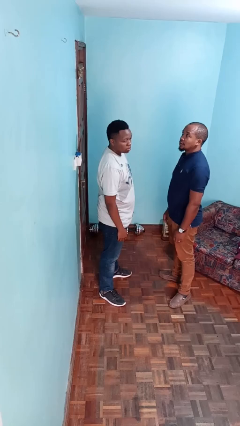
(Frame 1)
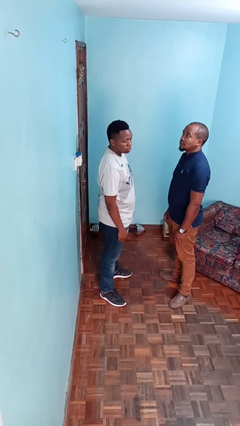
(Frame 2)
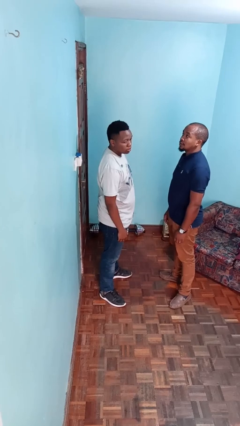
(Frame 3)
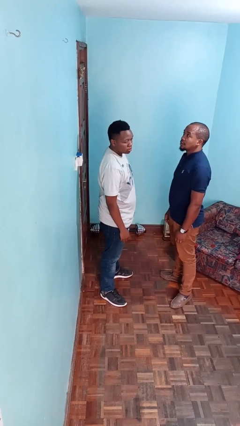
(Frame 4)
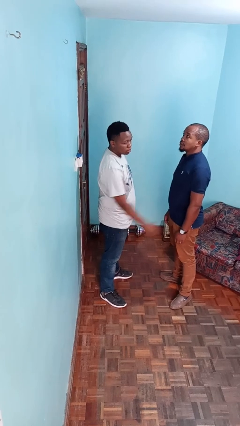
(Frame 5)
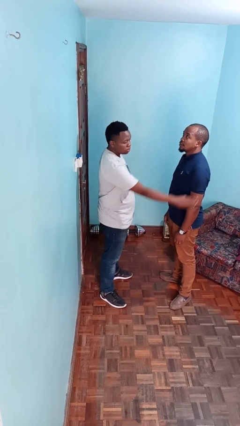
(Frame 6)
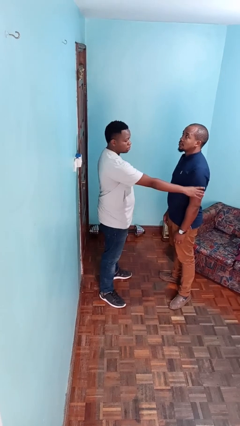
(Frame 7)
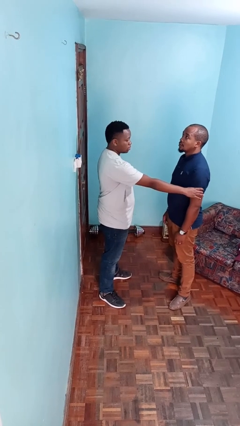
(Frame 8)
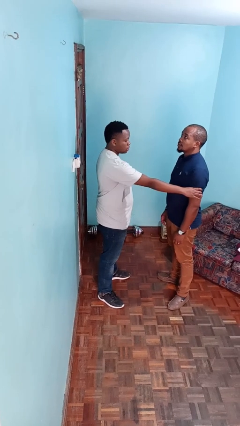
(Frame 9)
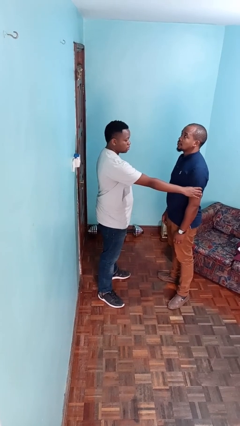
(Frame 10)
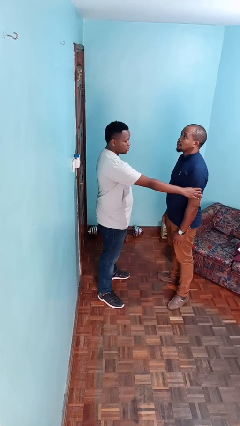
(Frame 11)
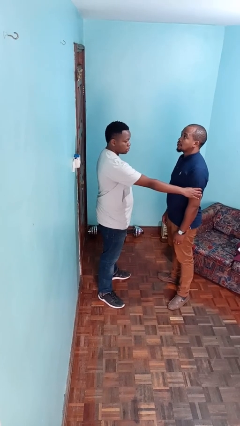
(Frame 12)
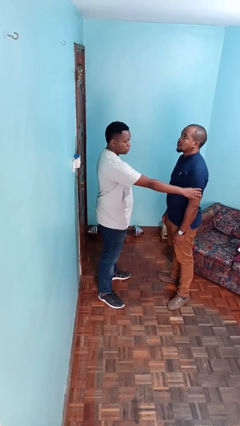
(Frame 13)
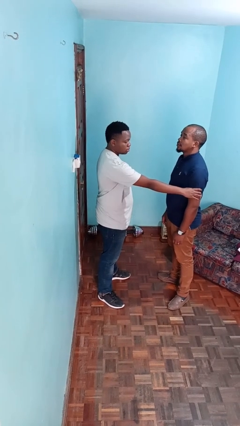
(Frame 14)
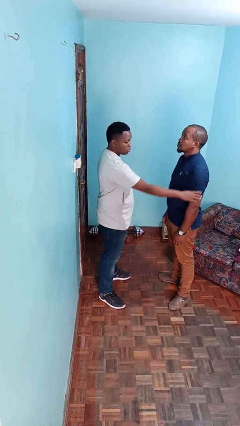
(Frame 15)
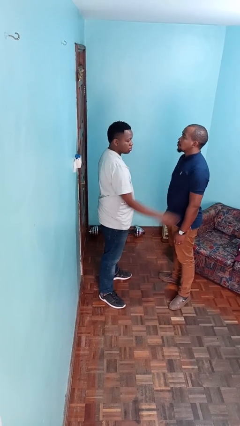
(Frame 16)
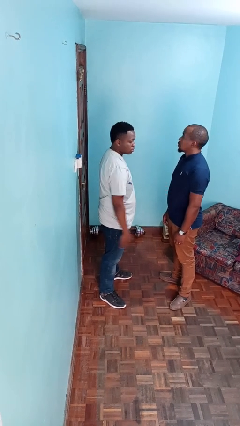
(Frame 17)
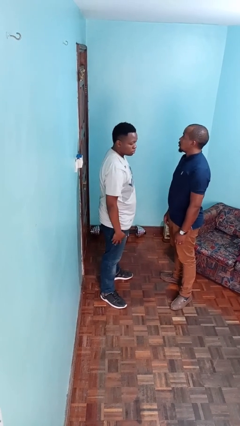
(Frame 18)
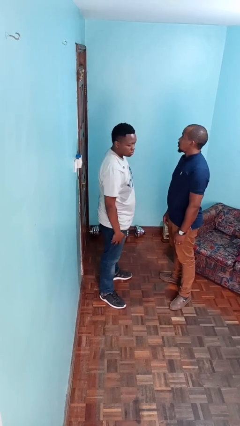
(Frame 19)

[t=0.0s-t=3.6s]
person grabs person by bicep

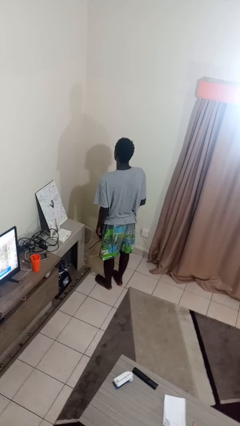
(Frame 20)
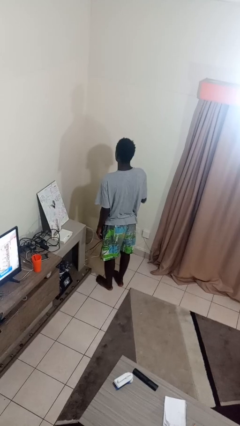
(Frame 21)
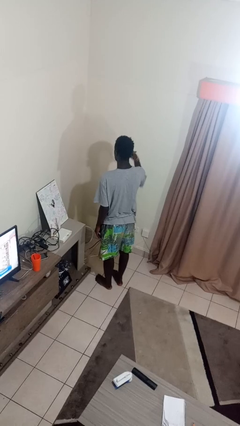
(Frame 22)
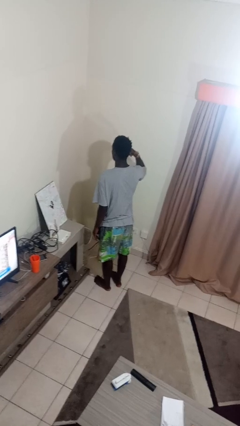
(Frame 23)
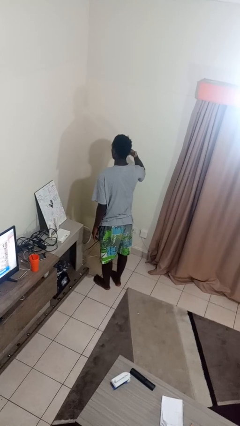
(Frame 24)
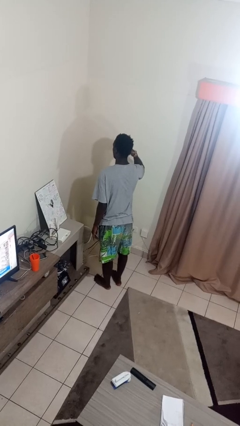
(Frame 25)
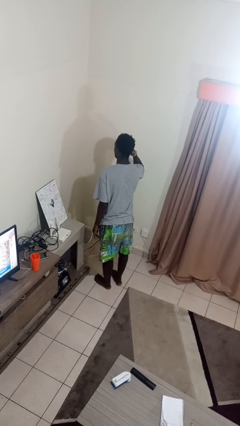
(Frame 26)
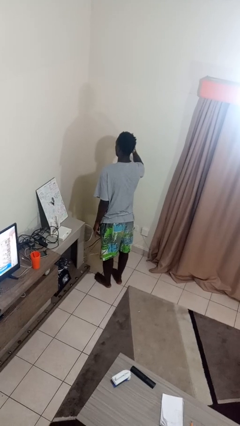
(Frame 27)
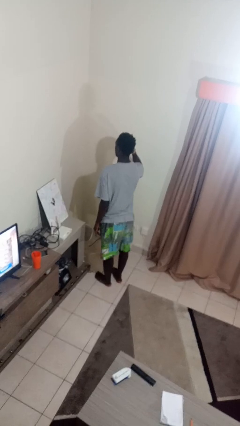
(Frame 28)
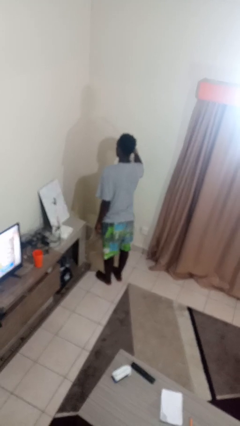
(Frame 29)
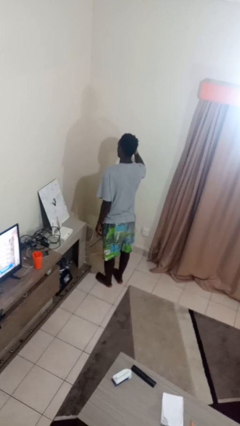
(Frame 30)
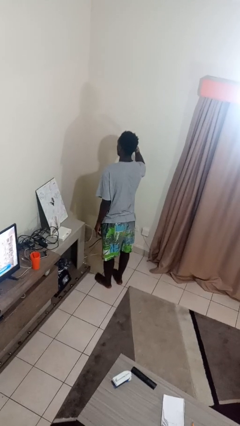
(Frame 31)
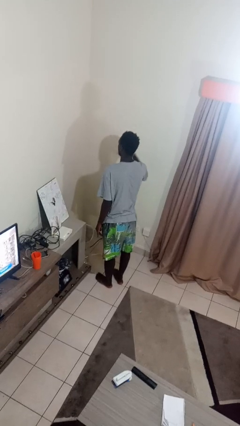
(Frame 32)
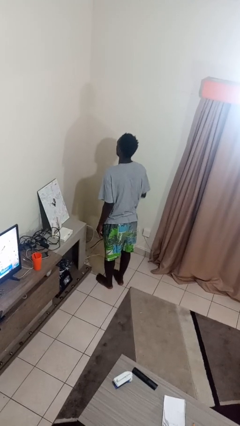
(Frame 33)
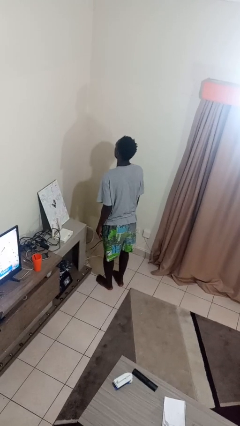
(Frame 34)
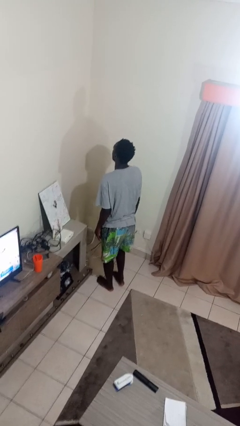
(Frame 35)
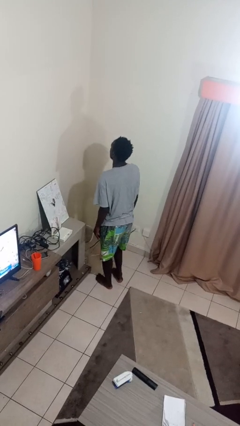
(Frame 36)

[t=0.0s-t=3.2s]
person gestures call me

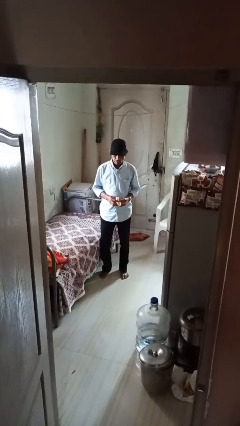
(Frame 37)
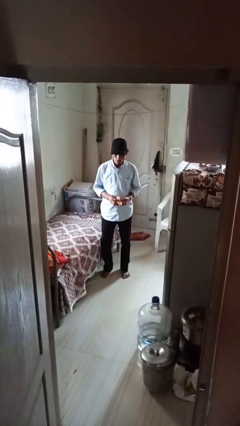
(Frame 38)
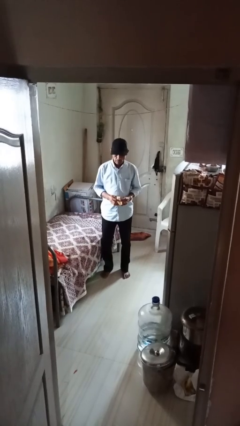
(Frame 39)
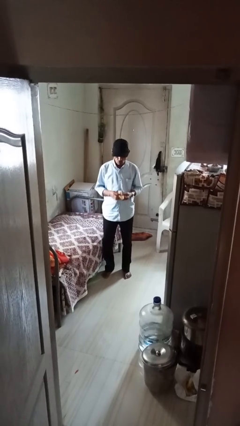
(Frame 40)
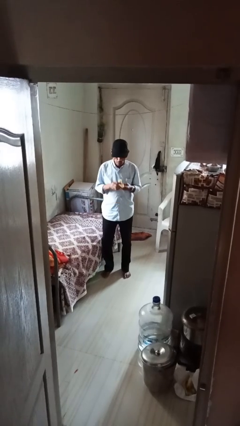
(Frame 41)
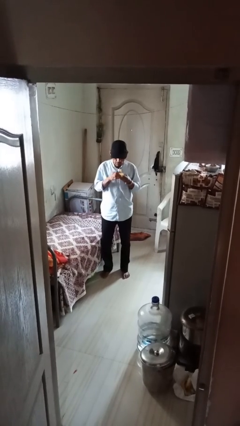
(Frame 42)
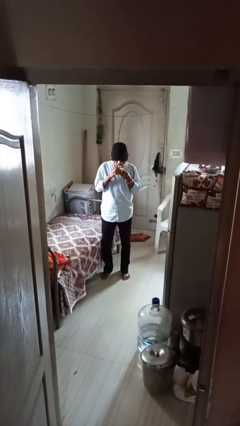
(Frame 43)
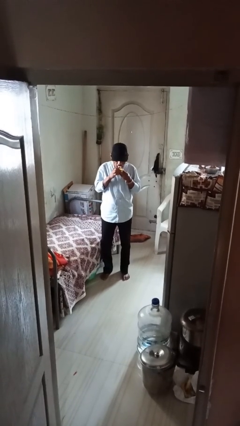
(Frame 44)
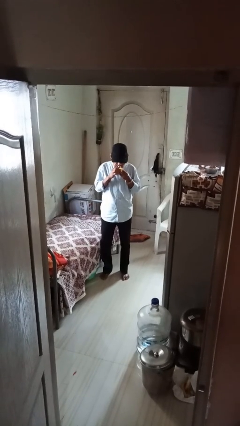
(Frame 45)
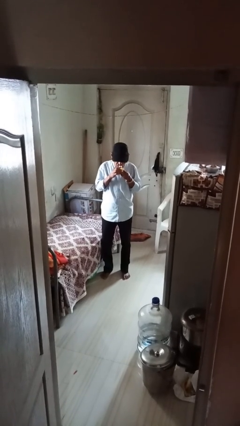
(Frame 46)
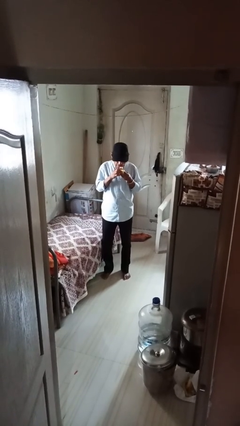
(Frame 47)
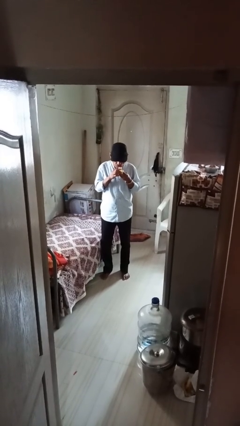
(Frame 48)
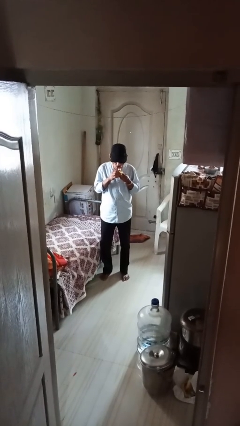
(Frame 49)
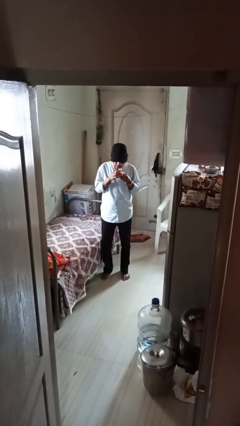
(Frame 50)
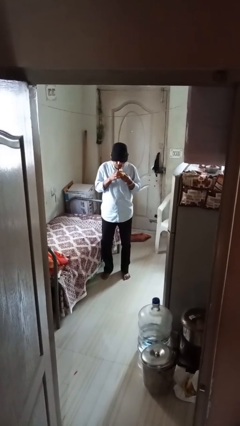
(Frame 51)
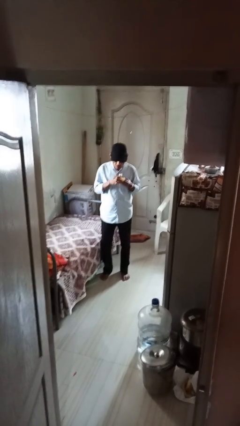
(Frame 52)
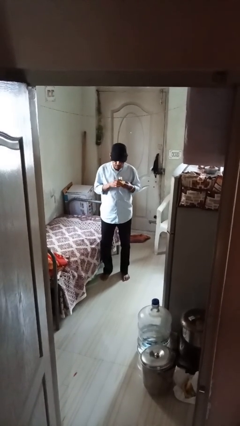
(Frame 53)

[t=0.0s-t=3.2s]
person eats banana

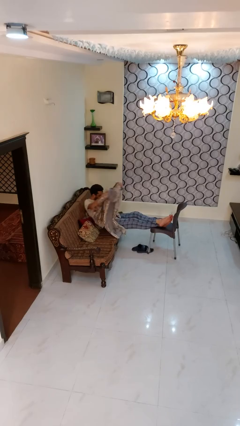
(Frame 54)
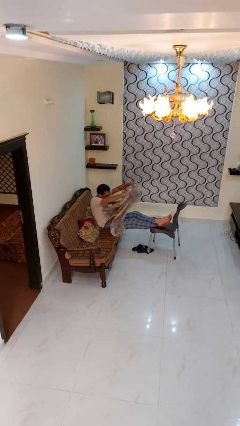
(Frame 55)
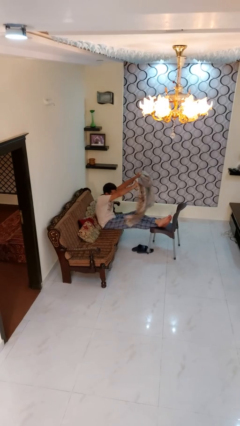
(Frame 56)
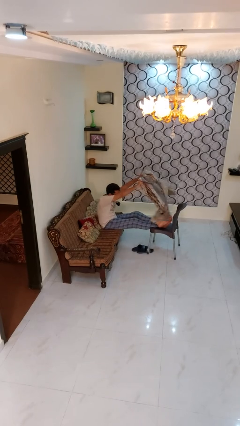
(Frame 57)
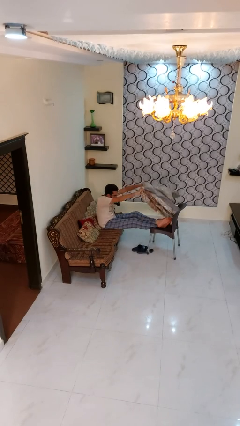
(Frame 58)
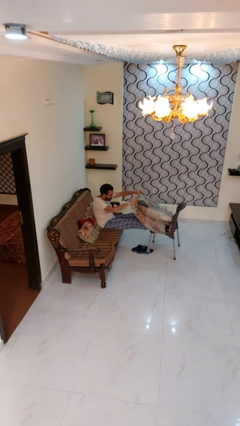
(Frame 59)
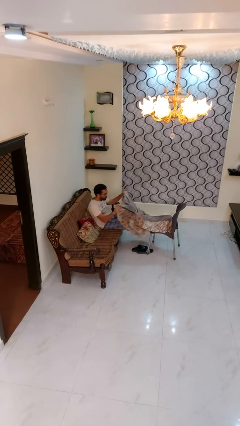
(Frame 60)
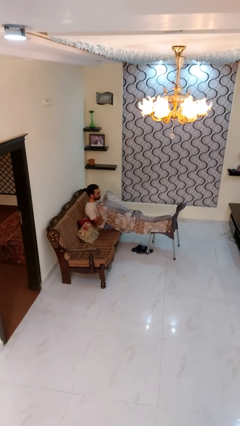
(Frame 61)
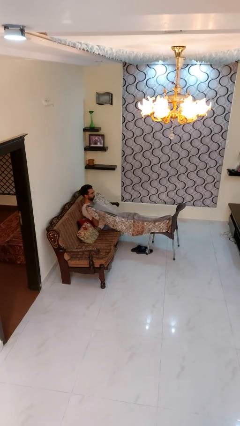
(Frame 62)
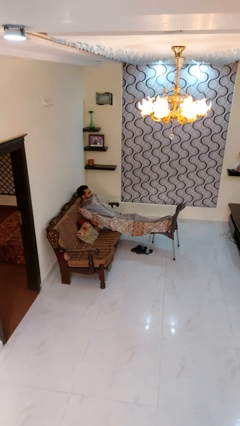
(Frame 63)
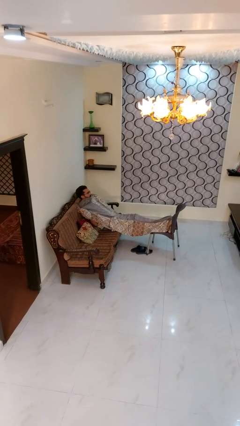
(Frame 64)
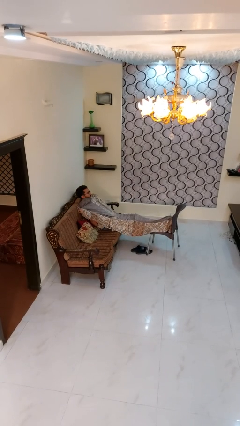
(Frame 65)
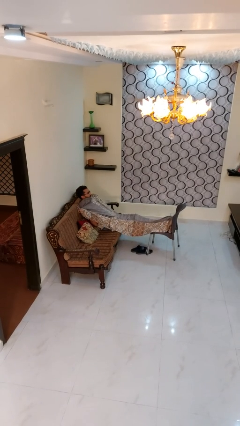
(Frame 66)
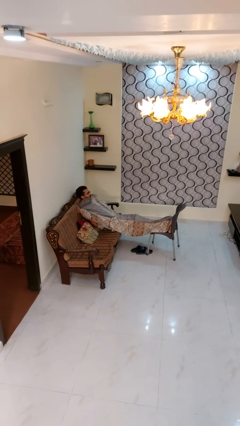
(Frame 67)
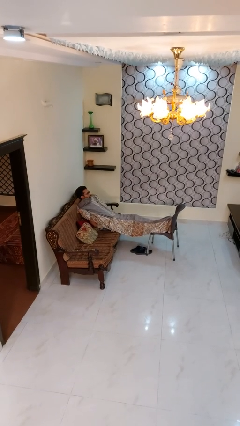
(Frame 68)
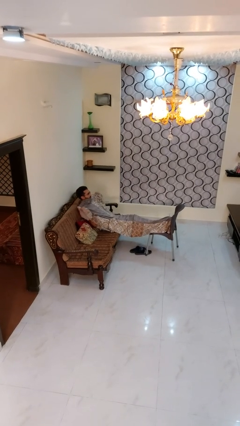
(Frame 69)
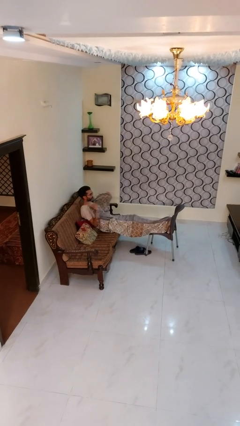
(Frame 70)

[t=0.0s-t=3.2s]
person covers with blanket

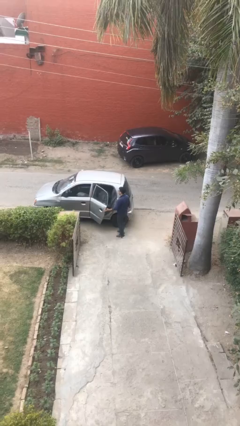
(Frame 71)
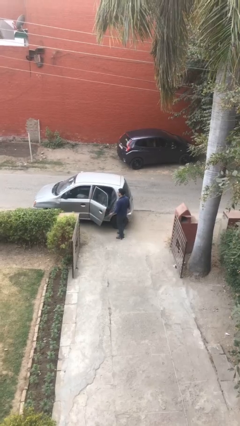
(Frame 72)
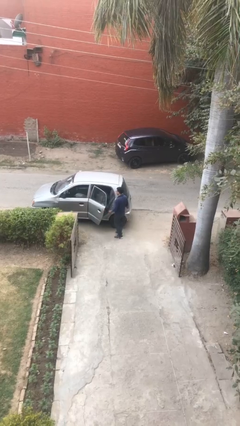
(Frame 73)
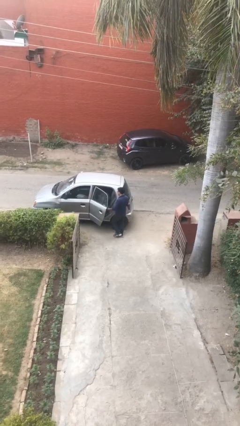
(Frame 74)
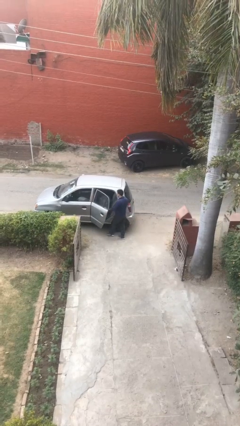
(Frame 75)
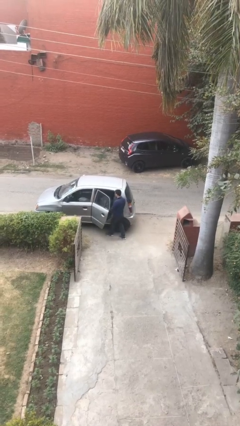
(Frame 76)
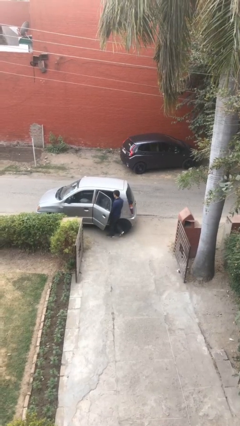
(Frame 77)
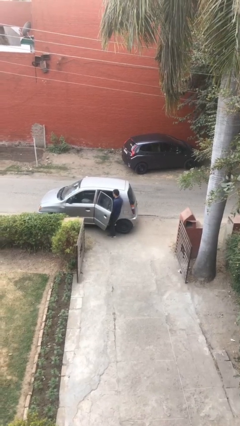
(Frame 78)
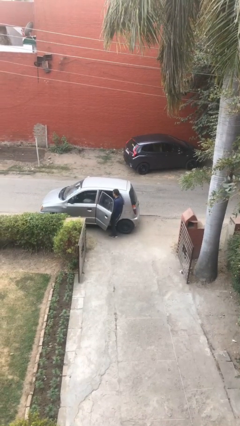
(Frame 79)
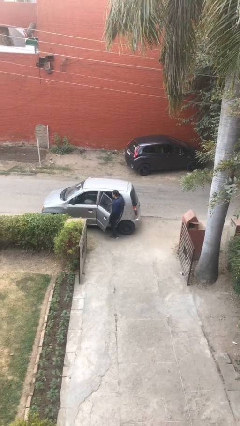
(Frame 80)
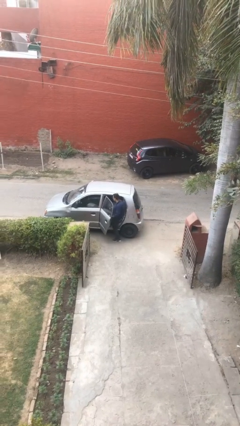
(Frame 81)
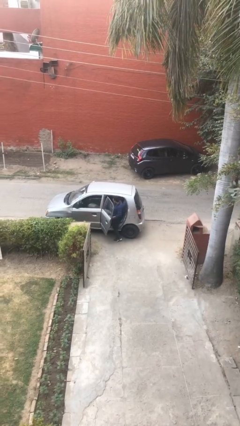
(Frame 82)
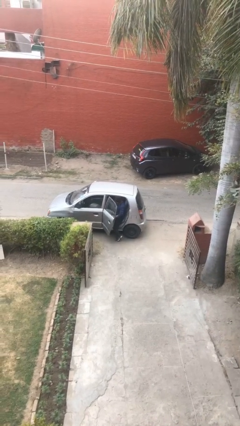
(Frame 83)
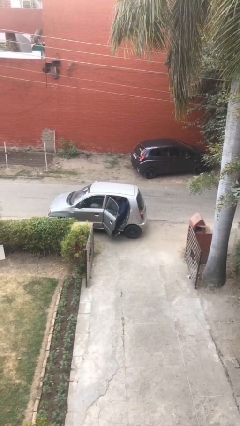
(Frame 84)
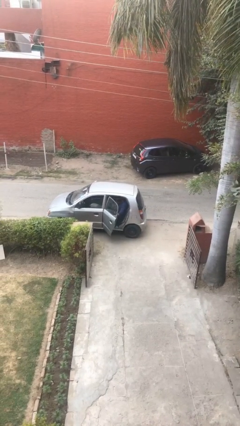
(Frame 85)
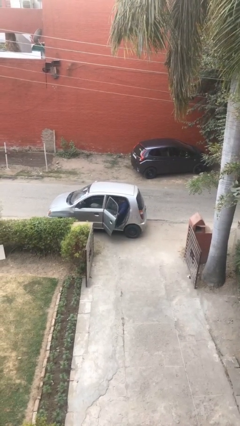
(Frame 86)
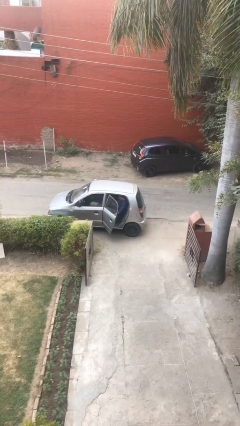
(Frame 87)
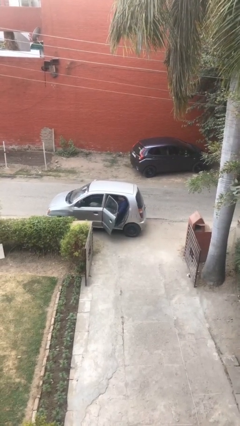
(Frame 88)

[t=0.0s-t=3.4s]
person enters car

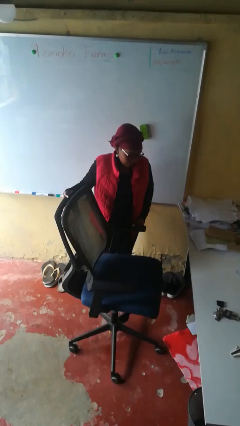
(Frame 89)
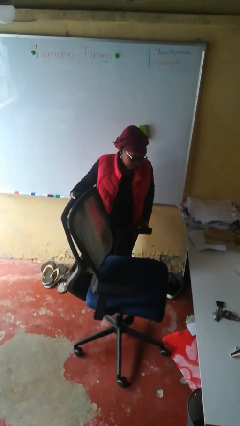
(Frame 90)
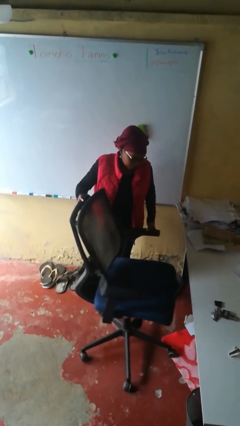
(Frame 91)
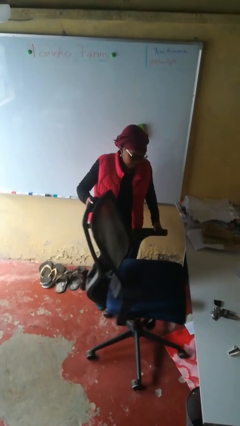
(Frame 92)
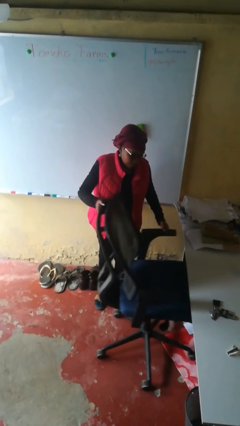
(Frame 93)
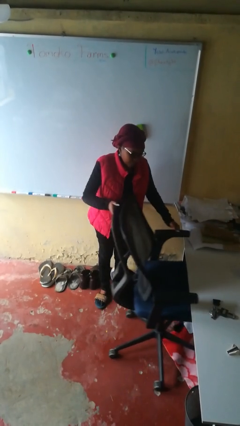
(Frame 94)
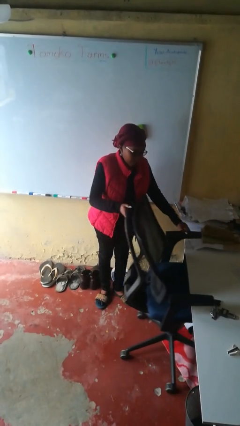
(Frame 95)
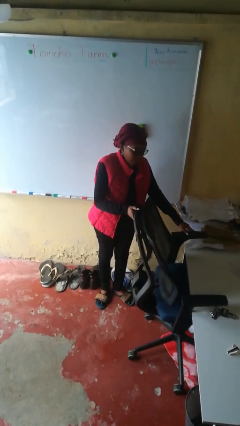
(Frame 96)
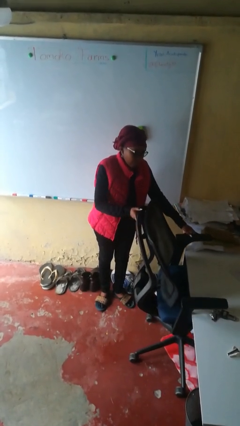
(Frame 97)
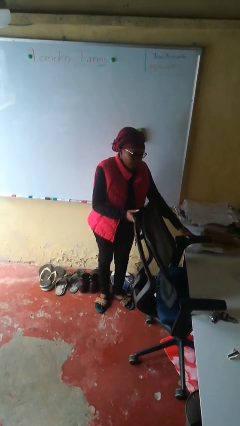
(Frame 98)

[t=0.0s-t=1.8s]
person pushes in chair
